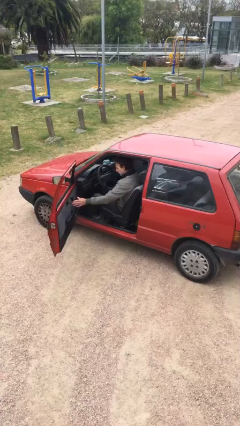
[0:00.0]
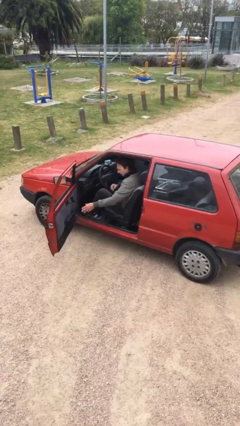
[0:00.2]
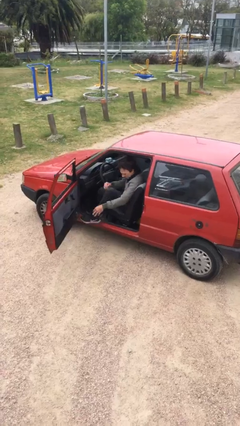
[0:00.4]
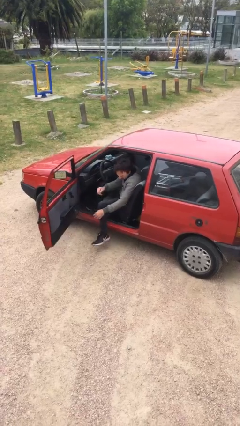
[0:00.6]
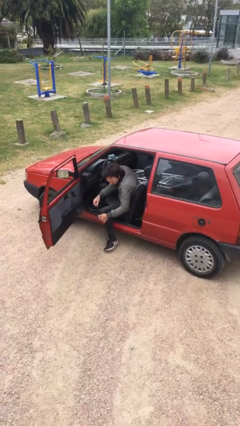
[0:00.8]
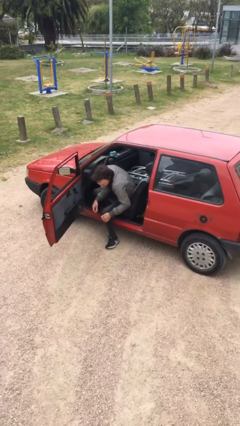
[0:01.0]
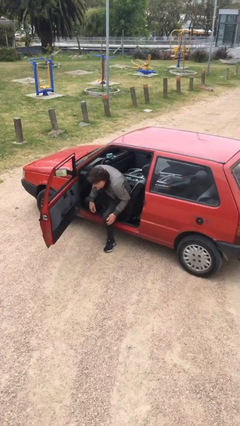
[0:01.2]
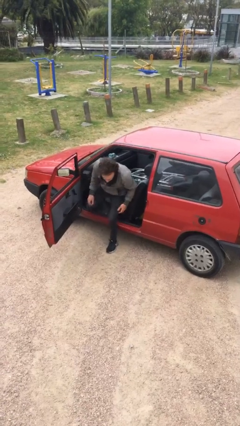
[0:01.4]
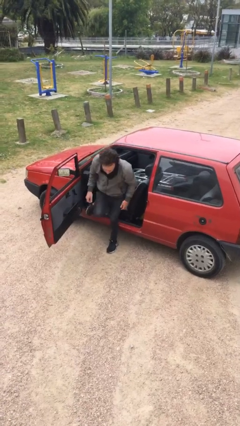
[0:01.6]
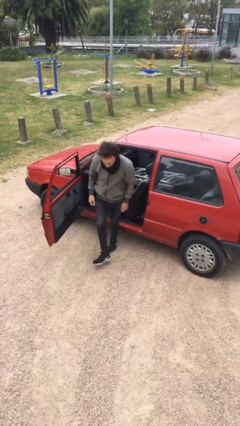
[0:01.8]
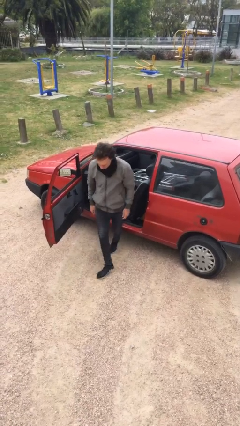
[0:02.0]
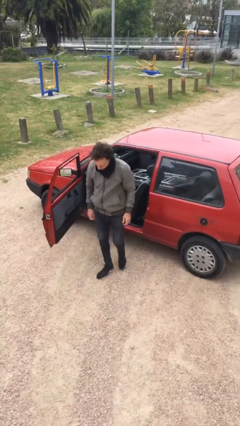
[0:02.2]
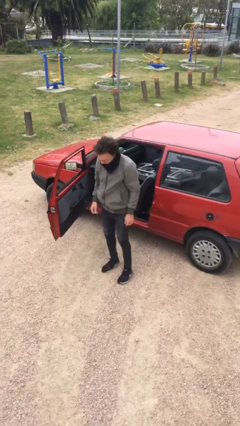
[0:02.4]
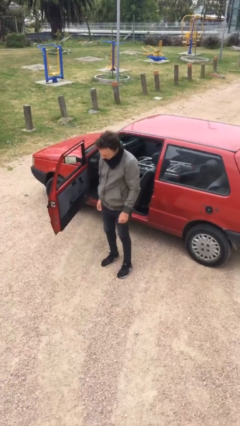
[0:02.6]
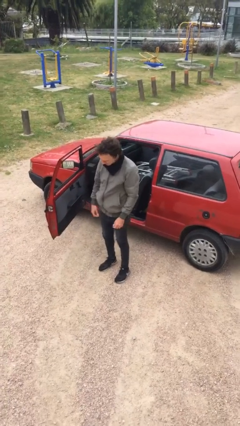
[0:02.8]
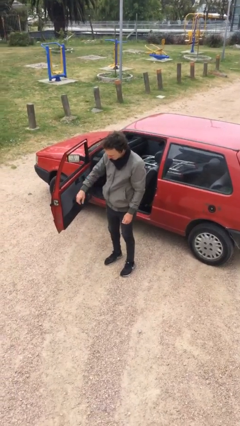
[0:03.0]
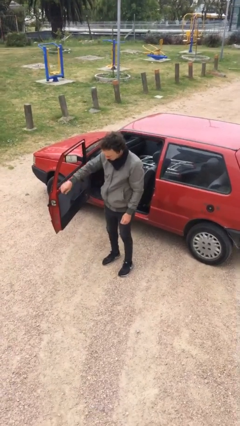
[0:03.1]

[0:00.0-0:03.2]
person exits car

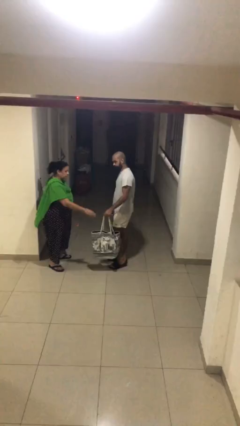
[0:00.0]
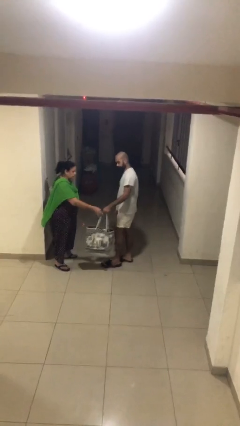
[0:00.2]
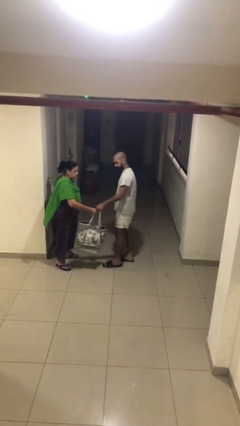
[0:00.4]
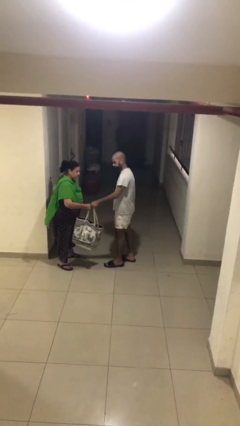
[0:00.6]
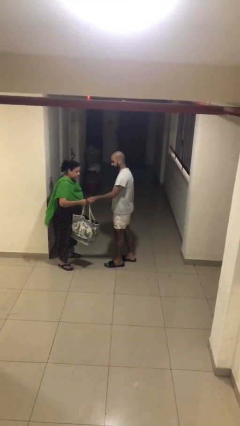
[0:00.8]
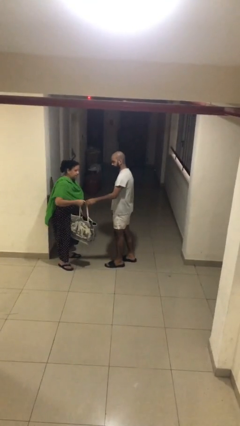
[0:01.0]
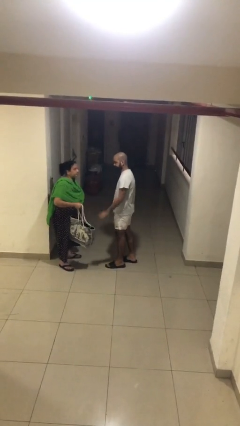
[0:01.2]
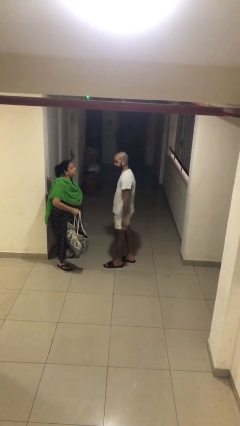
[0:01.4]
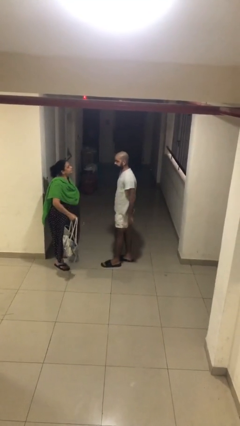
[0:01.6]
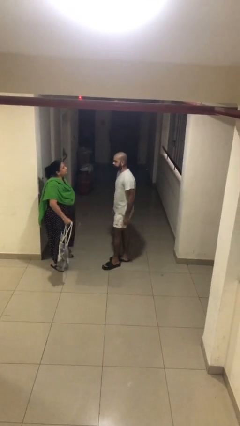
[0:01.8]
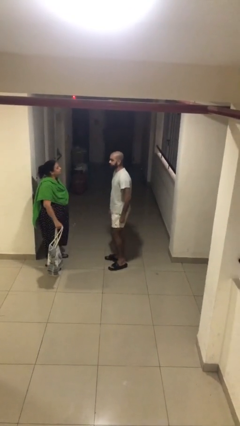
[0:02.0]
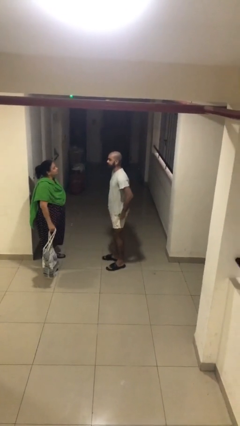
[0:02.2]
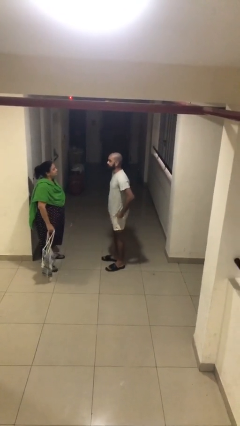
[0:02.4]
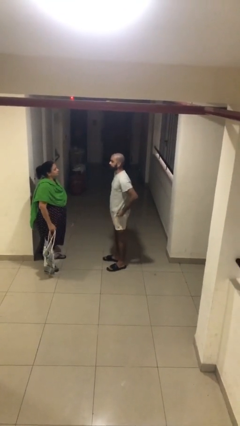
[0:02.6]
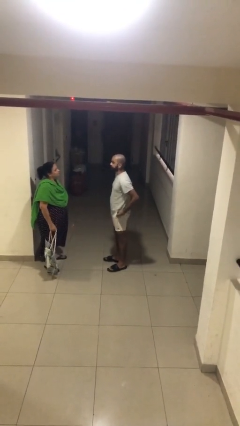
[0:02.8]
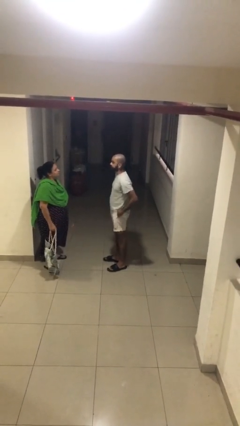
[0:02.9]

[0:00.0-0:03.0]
person transfers object to person

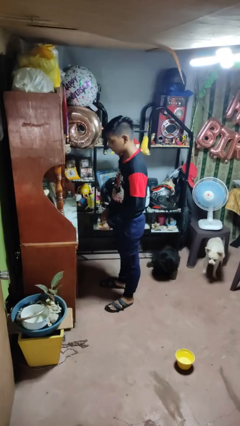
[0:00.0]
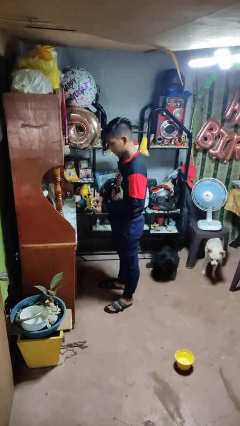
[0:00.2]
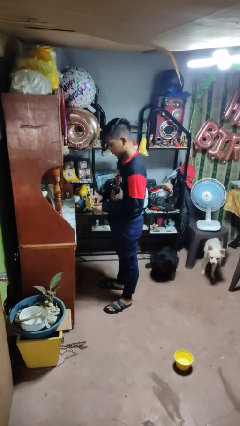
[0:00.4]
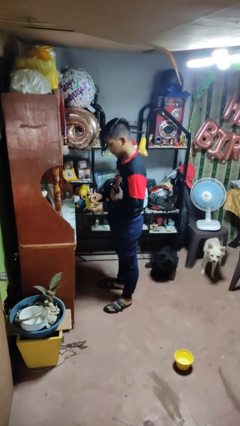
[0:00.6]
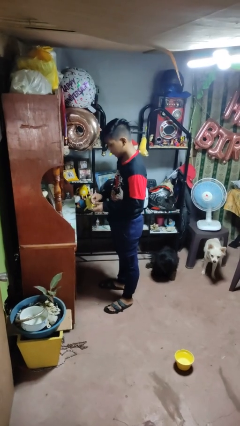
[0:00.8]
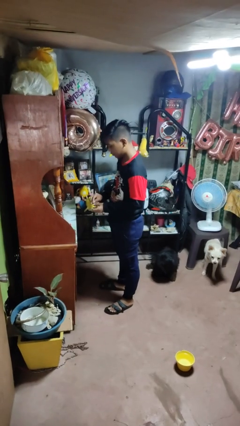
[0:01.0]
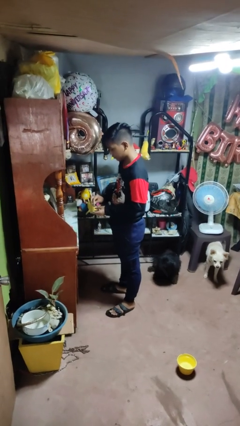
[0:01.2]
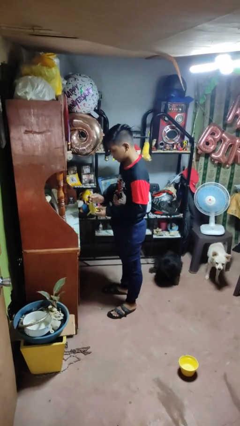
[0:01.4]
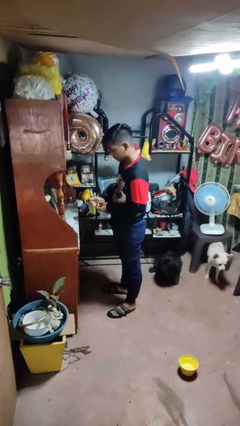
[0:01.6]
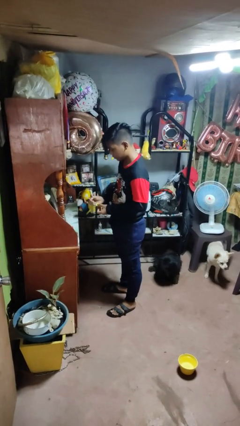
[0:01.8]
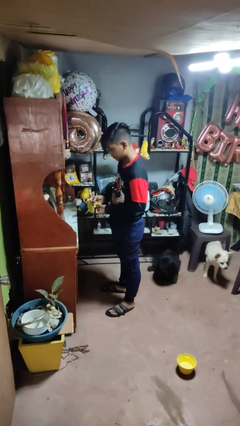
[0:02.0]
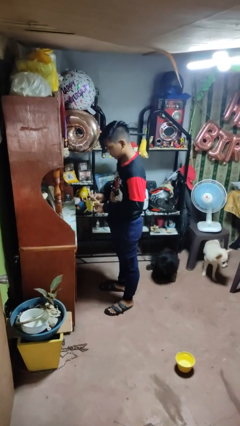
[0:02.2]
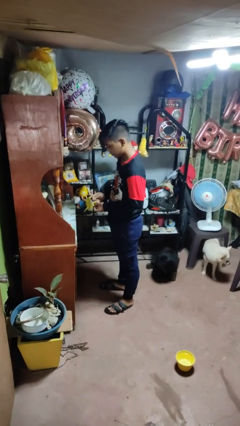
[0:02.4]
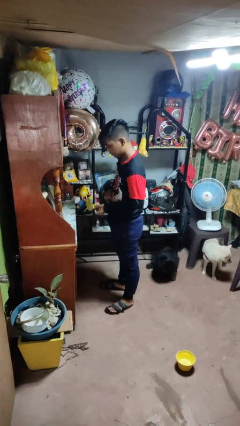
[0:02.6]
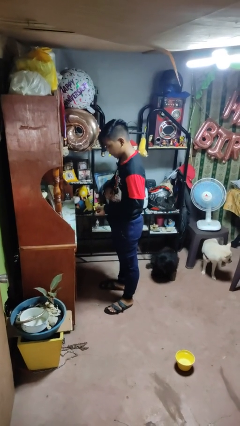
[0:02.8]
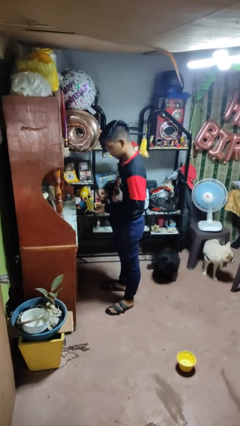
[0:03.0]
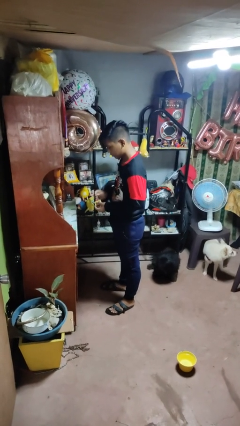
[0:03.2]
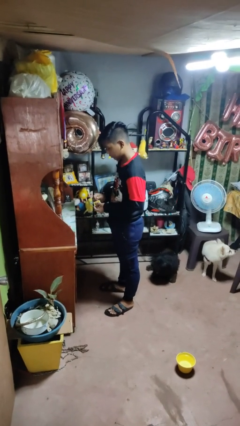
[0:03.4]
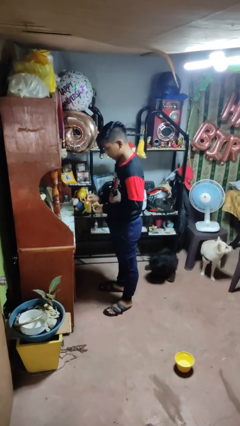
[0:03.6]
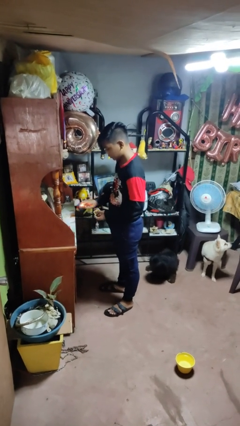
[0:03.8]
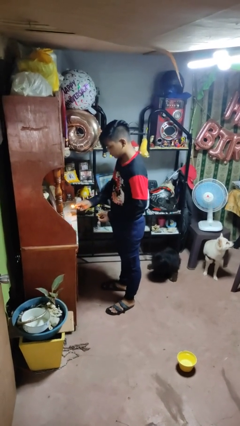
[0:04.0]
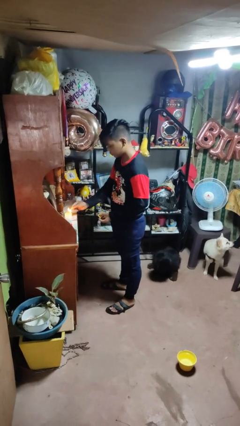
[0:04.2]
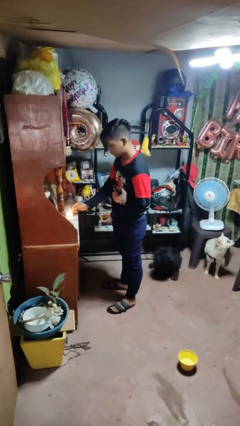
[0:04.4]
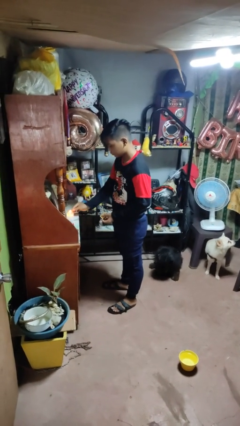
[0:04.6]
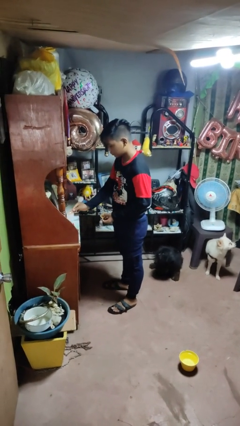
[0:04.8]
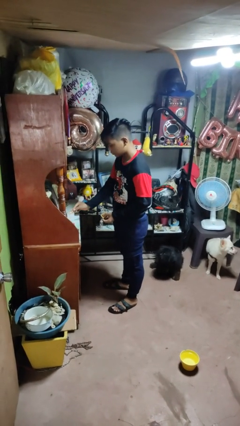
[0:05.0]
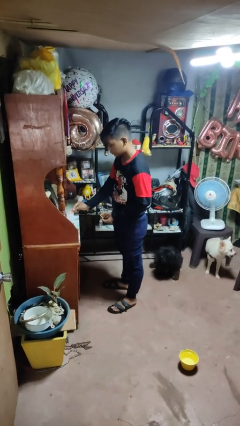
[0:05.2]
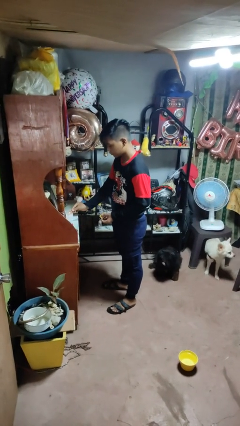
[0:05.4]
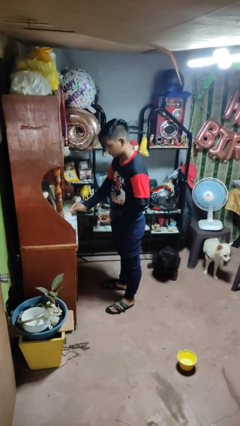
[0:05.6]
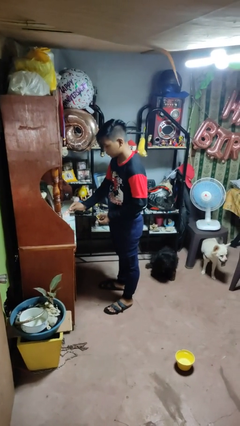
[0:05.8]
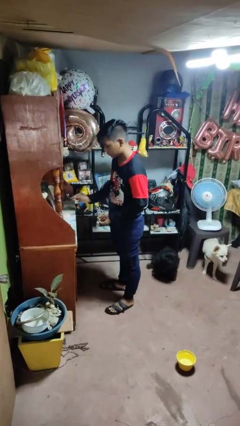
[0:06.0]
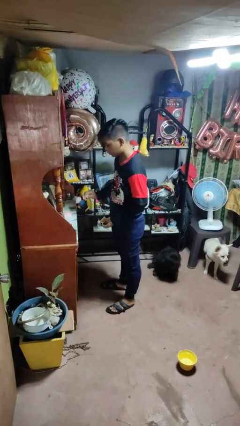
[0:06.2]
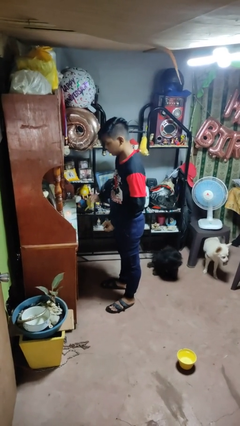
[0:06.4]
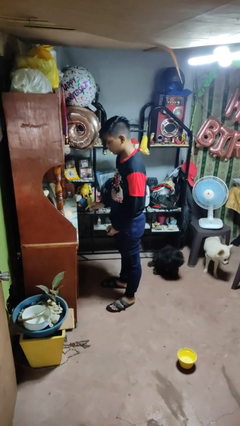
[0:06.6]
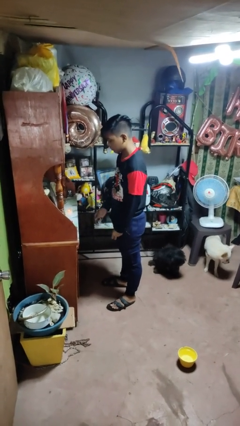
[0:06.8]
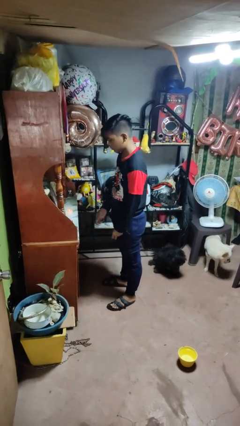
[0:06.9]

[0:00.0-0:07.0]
person lights candle

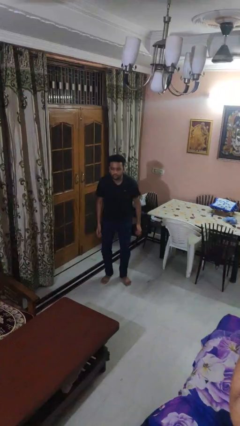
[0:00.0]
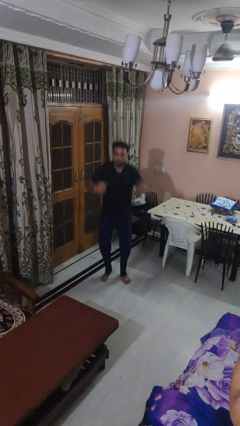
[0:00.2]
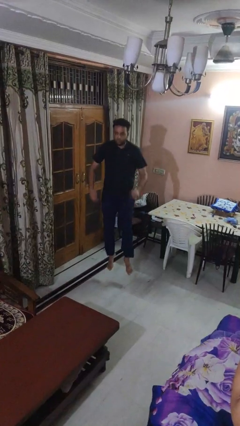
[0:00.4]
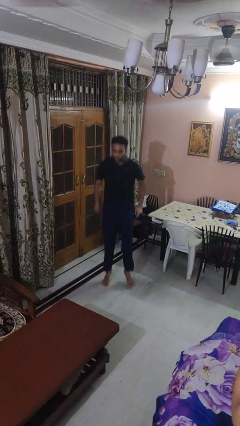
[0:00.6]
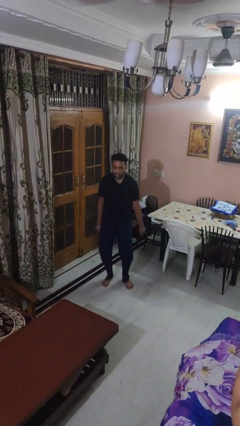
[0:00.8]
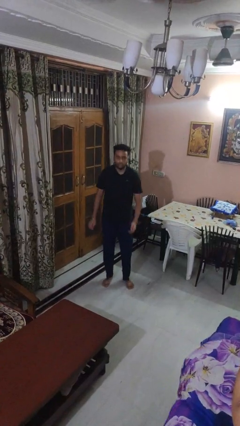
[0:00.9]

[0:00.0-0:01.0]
person jumps

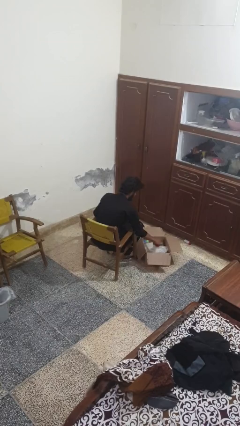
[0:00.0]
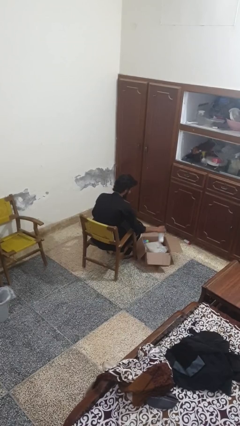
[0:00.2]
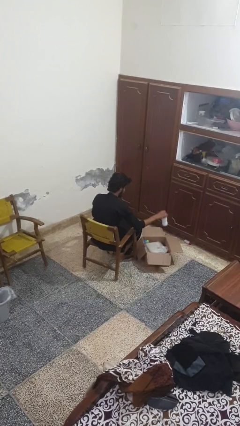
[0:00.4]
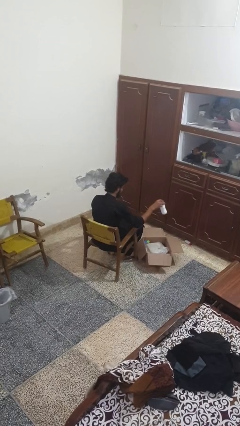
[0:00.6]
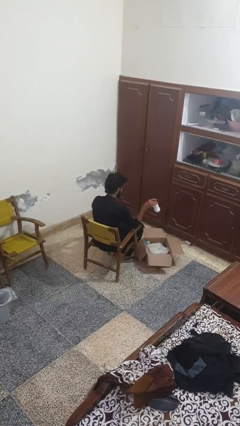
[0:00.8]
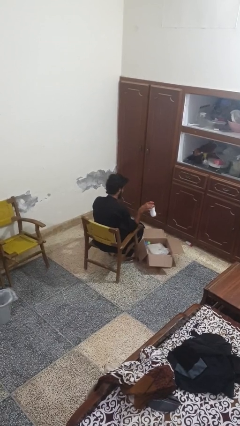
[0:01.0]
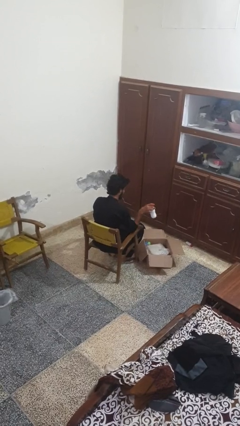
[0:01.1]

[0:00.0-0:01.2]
person takes object from box

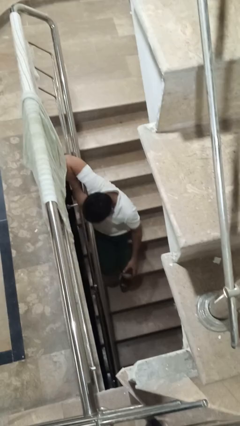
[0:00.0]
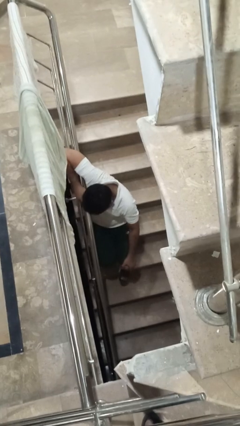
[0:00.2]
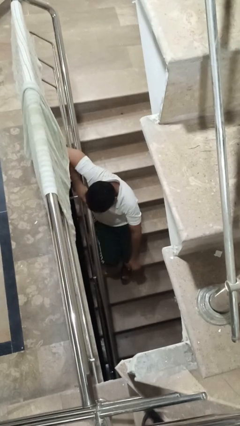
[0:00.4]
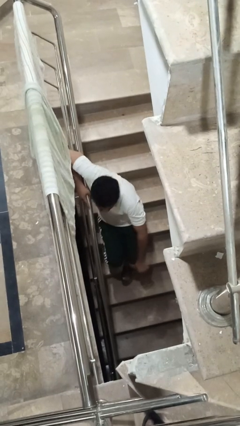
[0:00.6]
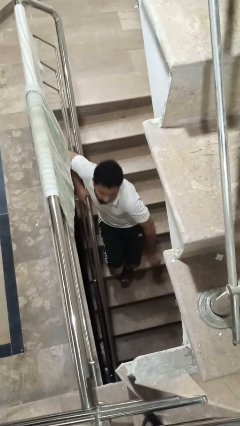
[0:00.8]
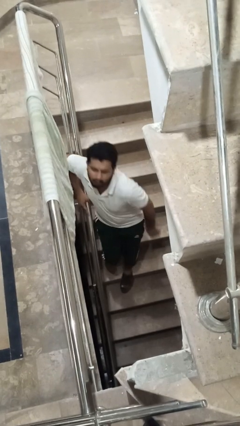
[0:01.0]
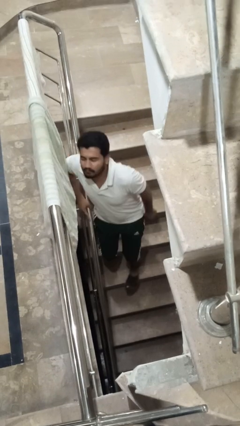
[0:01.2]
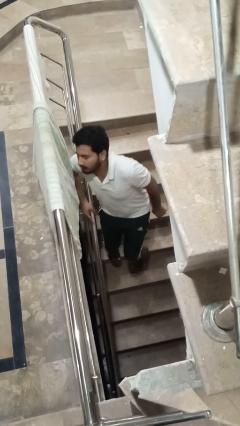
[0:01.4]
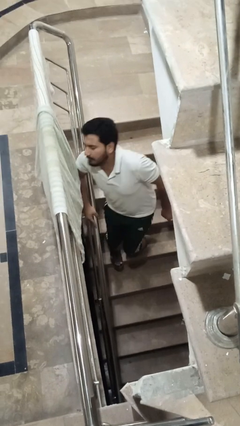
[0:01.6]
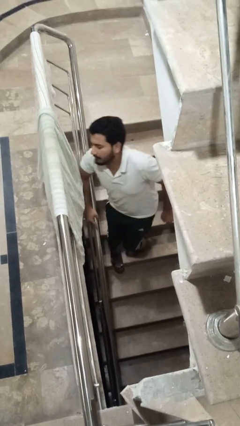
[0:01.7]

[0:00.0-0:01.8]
person trips on stair

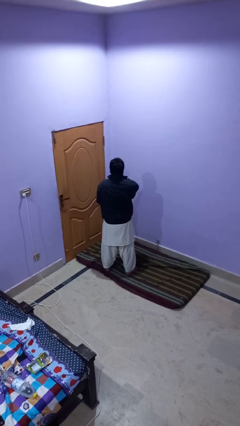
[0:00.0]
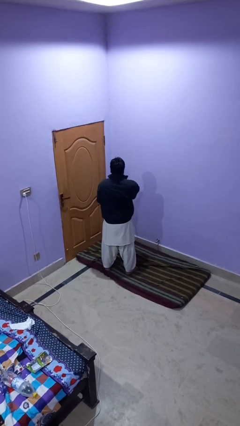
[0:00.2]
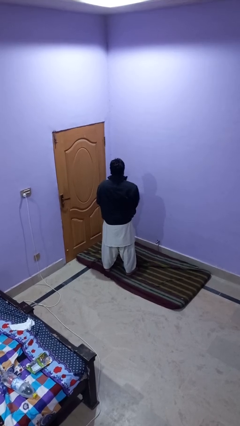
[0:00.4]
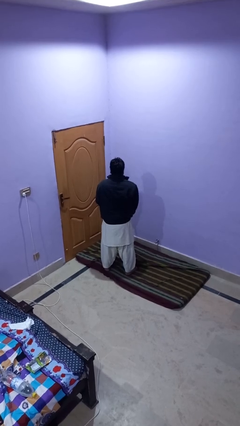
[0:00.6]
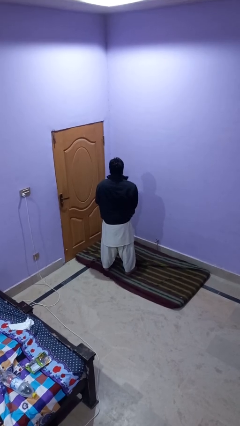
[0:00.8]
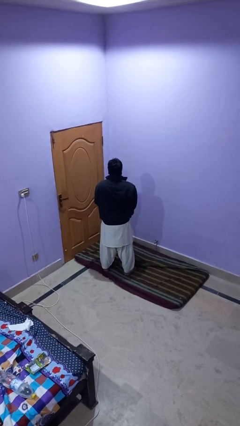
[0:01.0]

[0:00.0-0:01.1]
person unzips jacket
